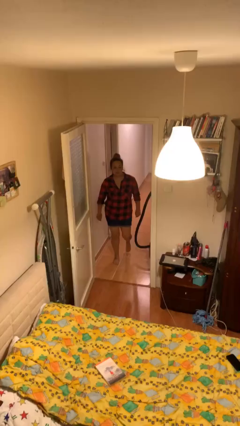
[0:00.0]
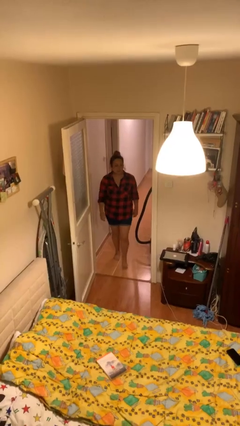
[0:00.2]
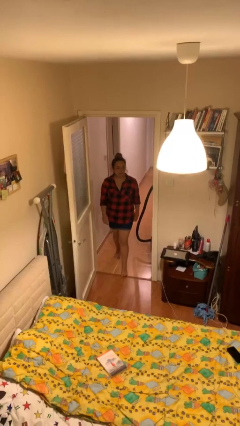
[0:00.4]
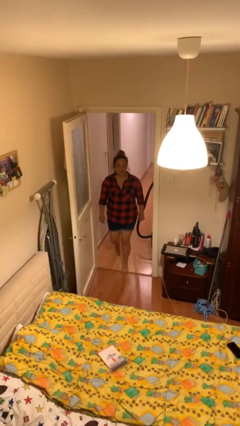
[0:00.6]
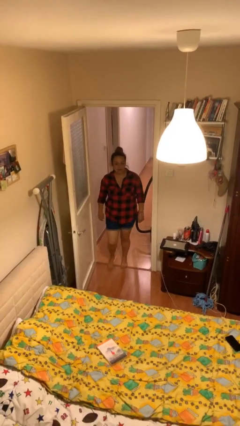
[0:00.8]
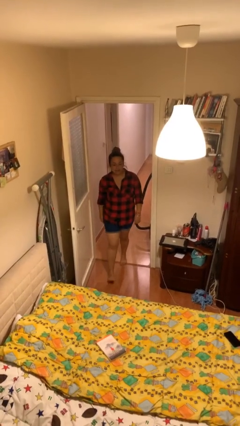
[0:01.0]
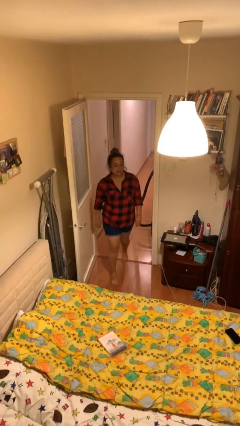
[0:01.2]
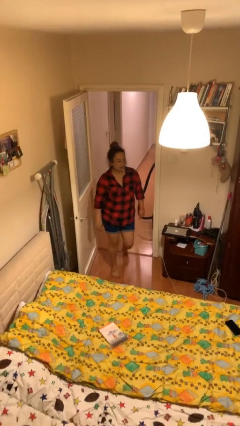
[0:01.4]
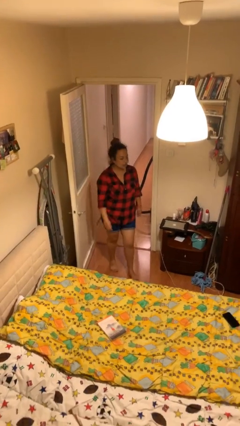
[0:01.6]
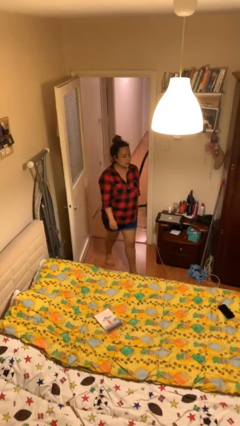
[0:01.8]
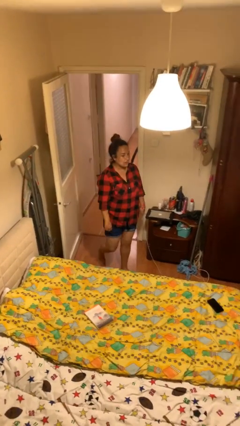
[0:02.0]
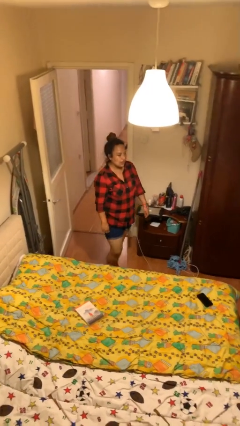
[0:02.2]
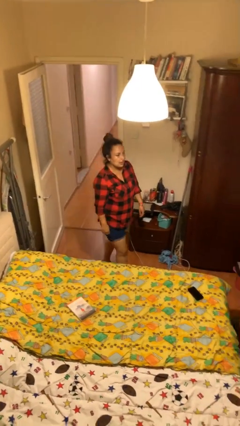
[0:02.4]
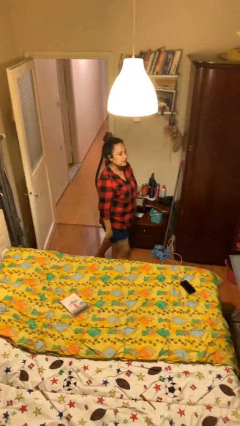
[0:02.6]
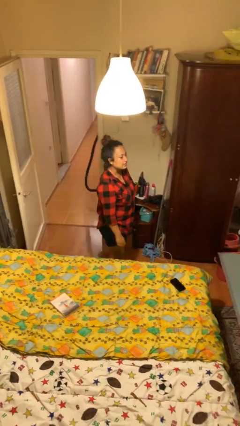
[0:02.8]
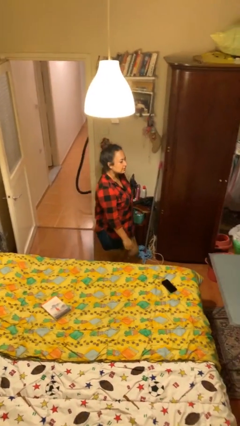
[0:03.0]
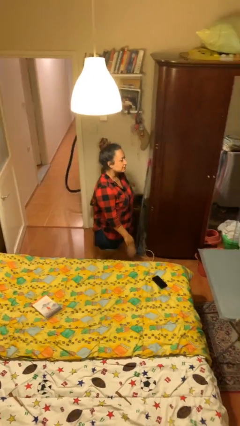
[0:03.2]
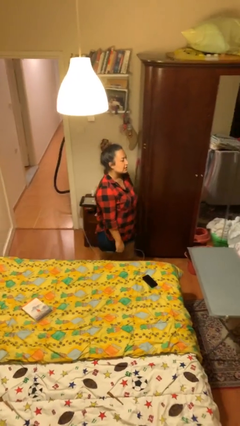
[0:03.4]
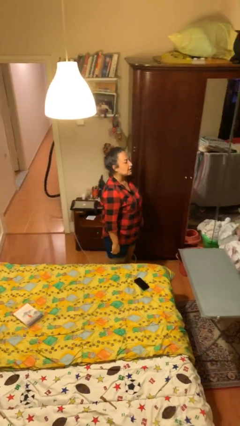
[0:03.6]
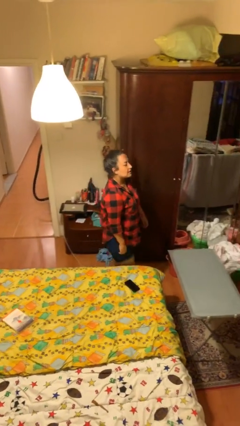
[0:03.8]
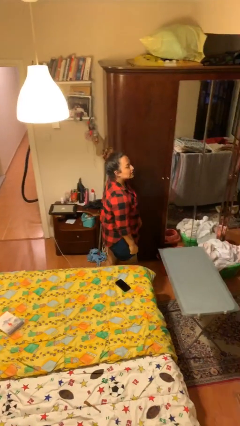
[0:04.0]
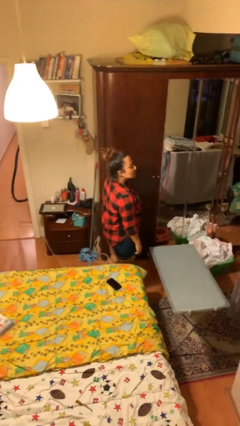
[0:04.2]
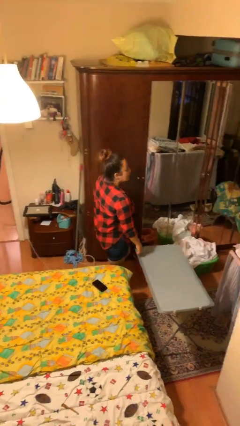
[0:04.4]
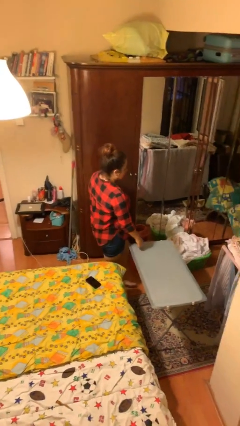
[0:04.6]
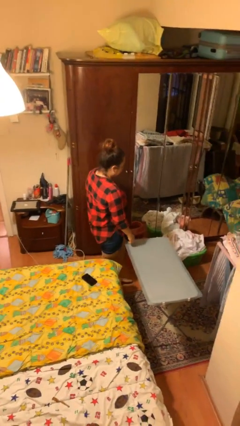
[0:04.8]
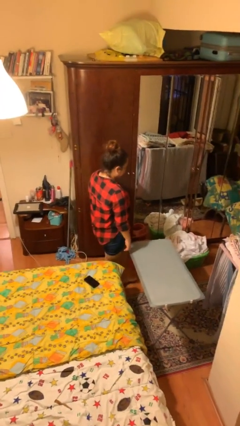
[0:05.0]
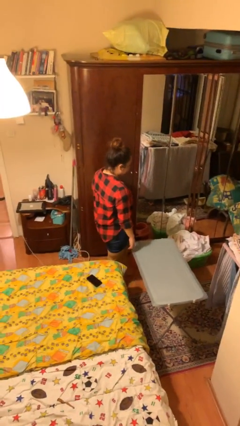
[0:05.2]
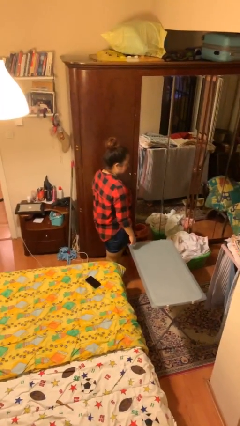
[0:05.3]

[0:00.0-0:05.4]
person enters scene through structure

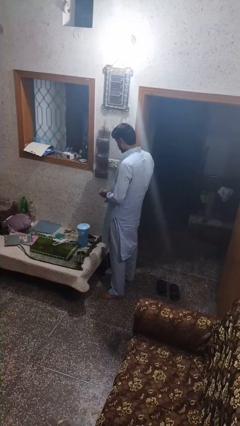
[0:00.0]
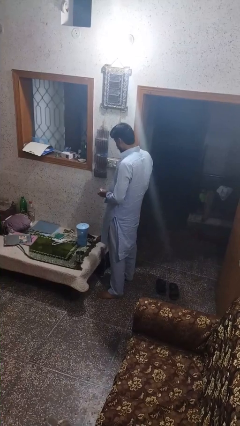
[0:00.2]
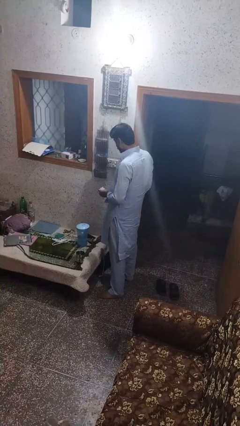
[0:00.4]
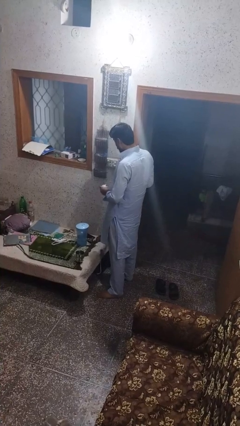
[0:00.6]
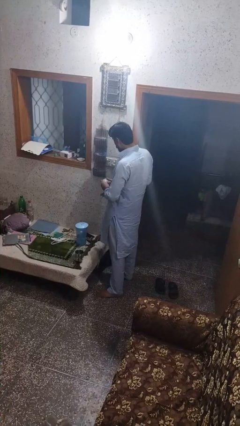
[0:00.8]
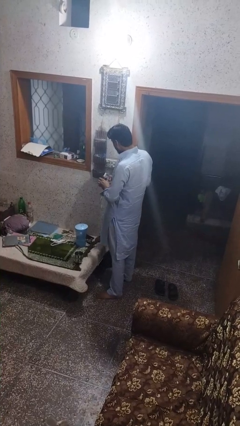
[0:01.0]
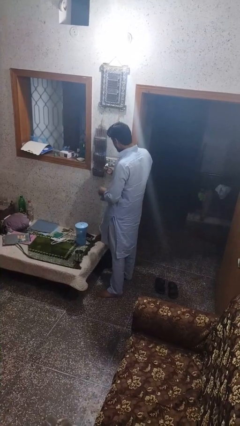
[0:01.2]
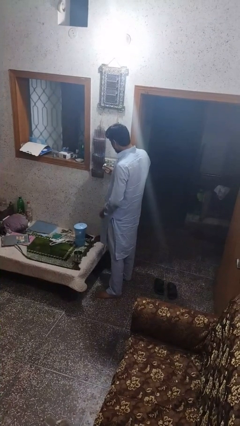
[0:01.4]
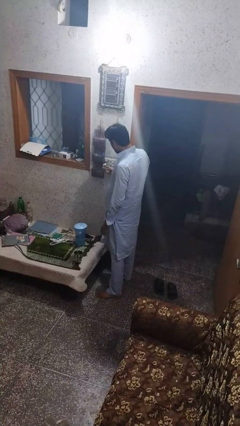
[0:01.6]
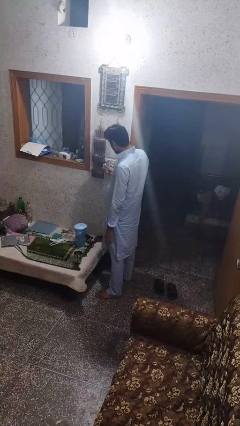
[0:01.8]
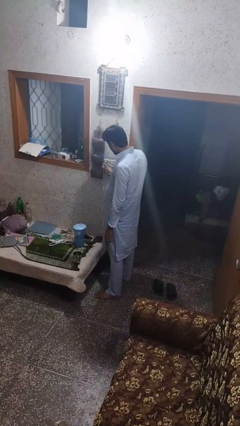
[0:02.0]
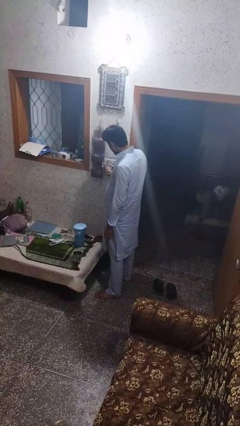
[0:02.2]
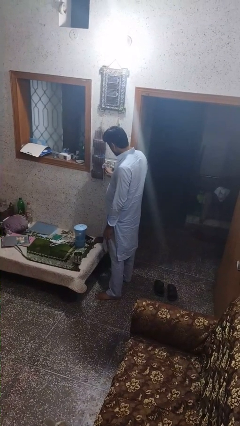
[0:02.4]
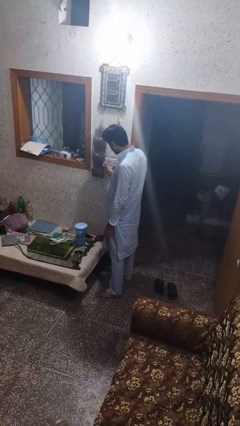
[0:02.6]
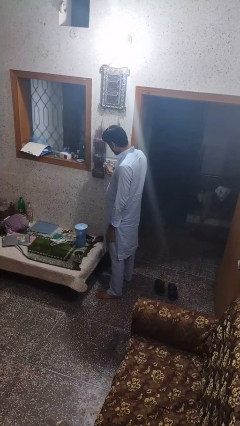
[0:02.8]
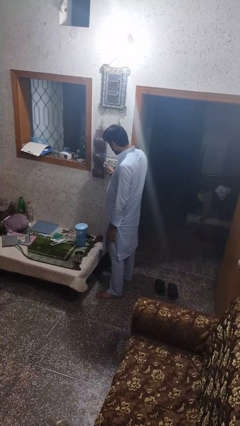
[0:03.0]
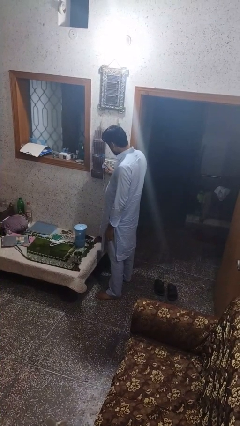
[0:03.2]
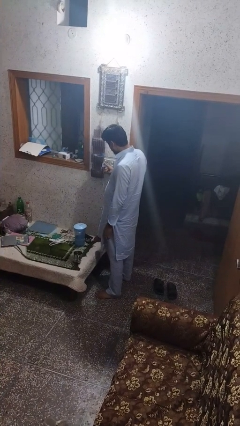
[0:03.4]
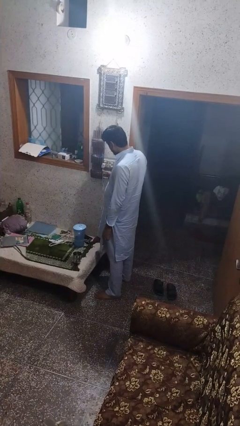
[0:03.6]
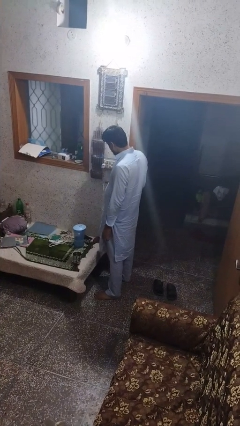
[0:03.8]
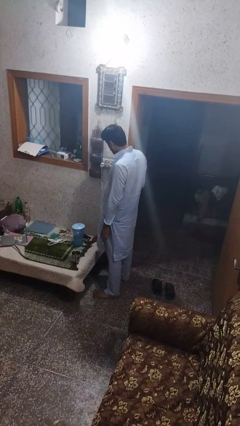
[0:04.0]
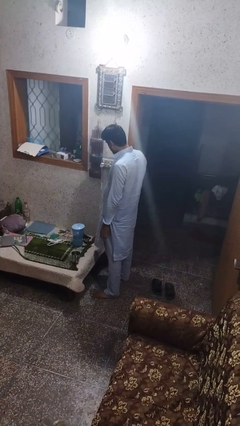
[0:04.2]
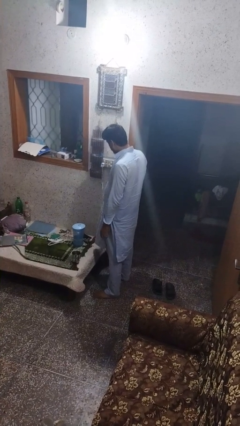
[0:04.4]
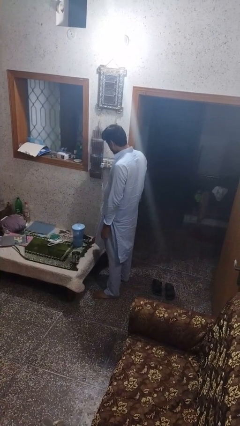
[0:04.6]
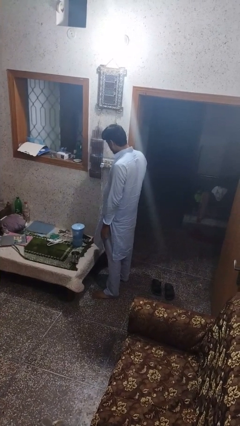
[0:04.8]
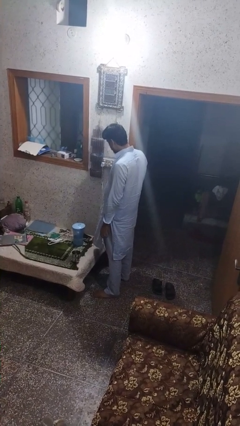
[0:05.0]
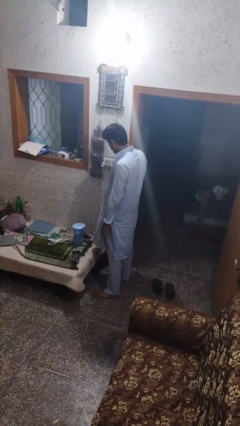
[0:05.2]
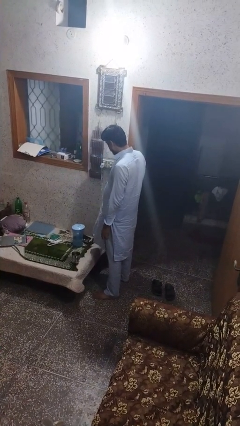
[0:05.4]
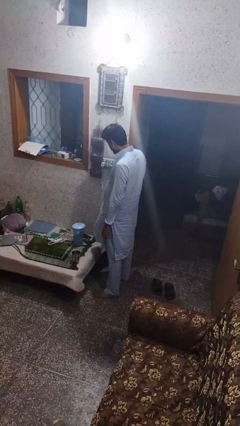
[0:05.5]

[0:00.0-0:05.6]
person plugs into electrical socket

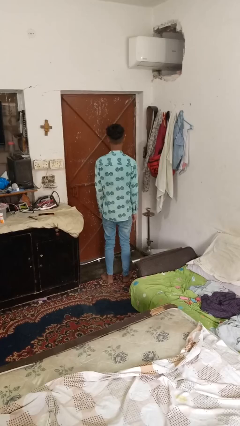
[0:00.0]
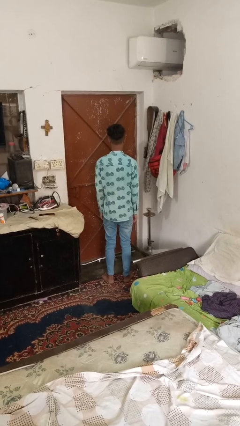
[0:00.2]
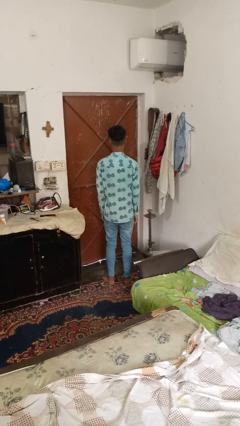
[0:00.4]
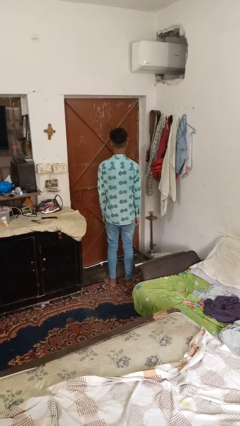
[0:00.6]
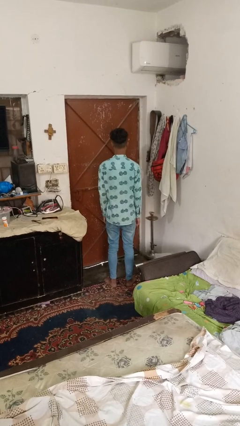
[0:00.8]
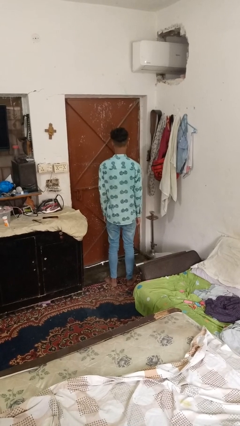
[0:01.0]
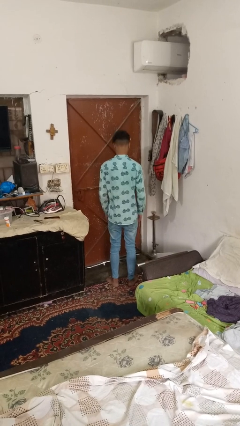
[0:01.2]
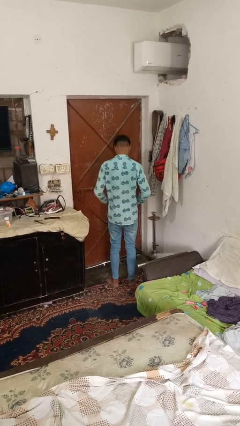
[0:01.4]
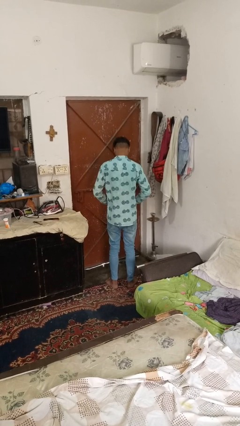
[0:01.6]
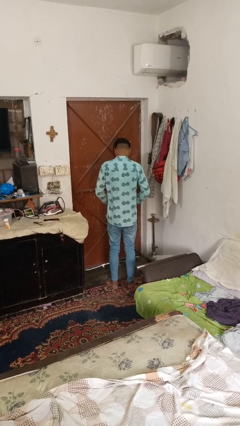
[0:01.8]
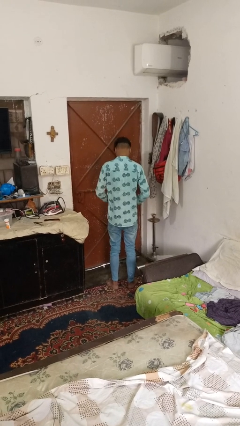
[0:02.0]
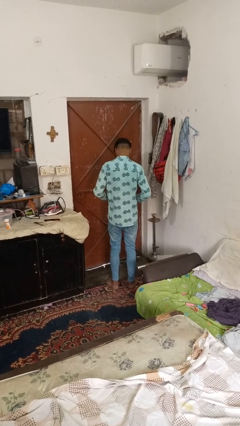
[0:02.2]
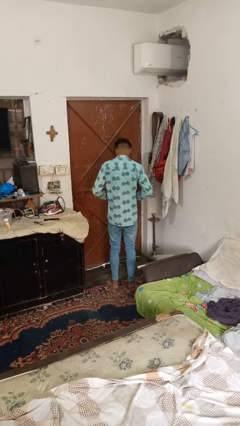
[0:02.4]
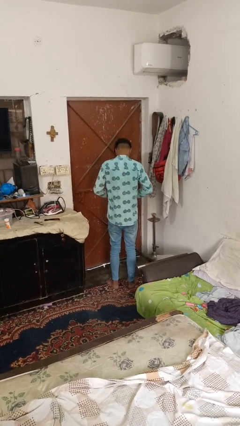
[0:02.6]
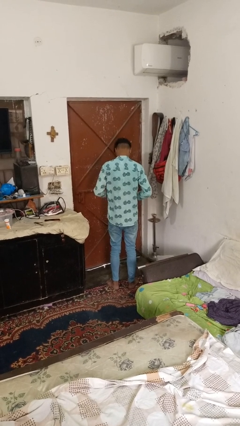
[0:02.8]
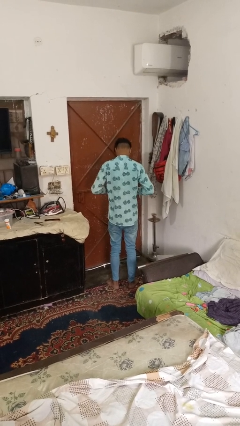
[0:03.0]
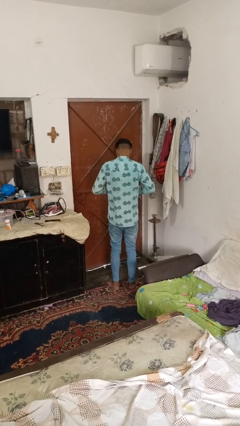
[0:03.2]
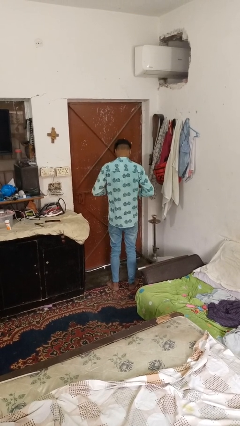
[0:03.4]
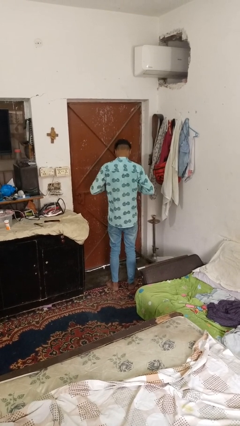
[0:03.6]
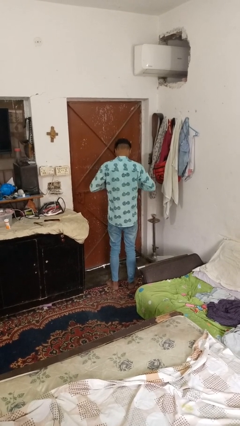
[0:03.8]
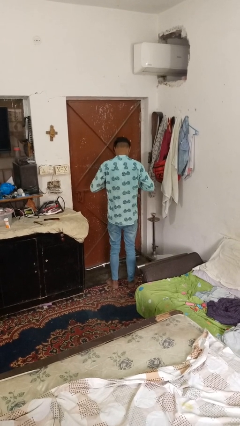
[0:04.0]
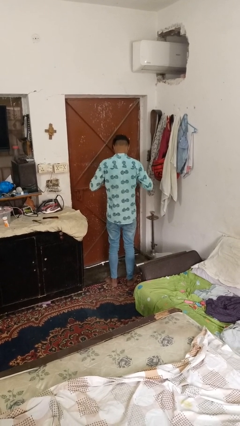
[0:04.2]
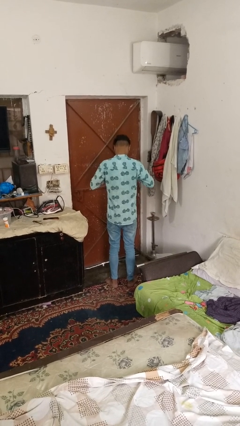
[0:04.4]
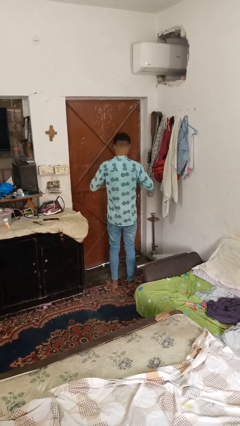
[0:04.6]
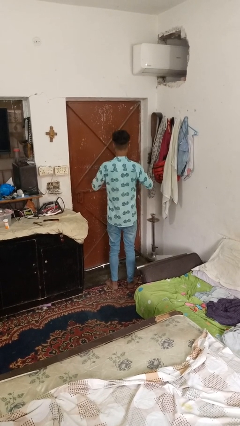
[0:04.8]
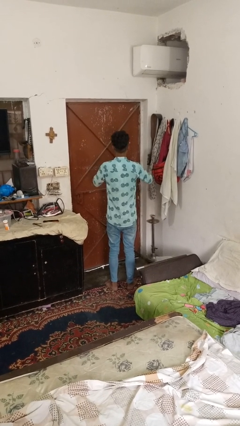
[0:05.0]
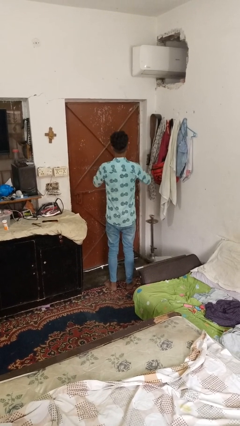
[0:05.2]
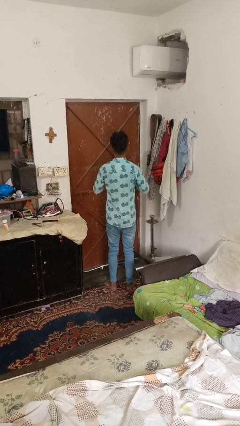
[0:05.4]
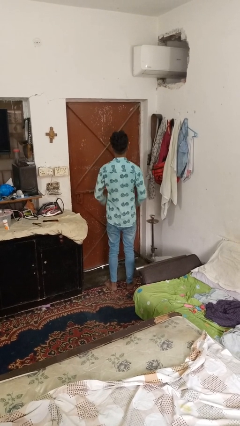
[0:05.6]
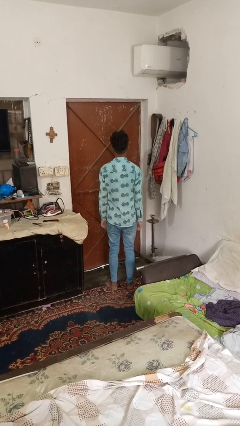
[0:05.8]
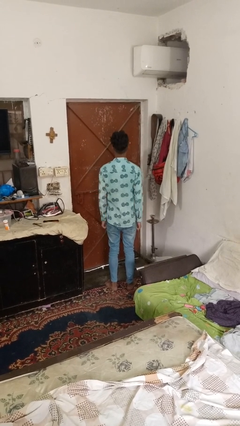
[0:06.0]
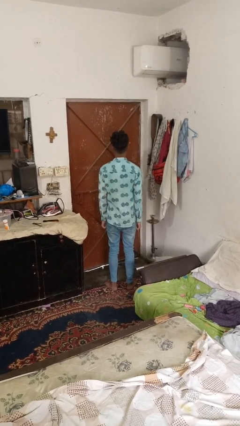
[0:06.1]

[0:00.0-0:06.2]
person buttons shirt

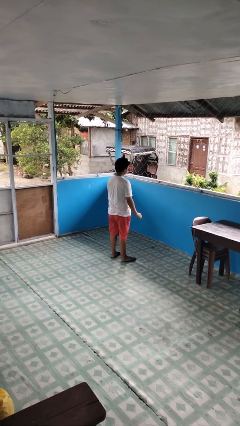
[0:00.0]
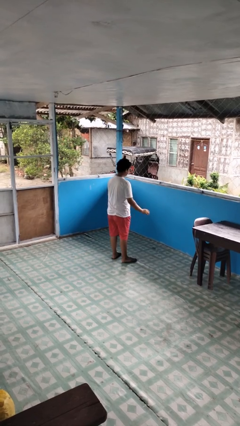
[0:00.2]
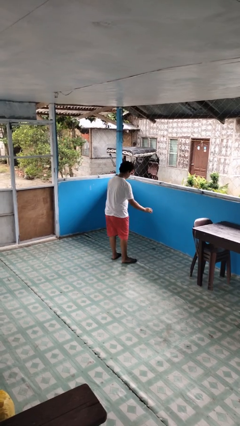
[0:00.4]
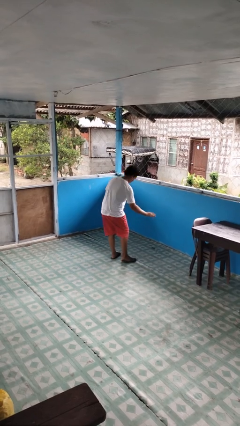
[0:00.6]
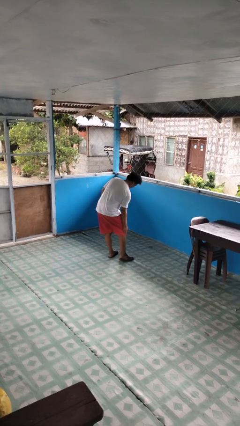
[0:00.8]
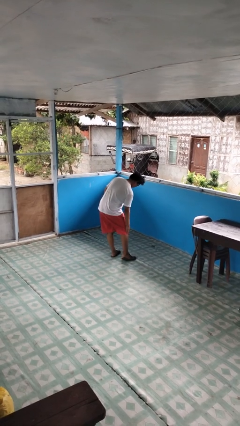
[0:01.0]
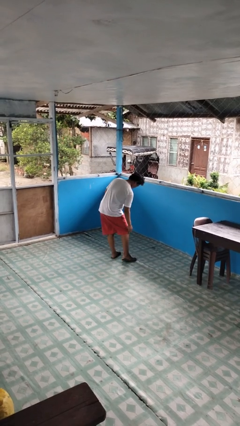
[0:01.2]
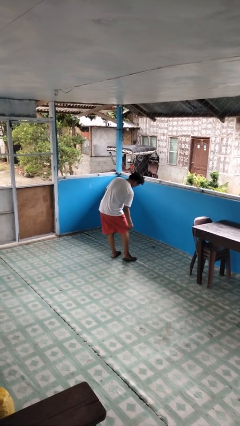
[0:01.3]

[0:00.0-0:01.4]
person swats bug
